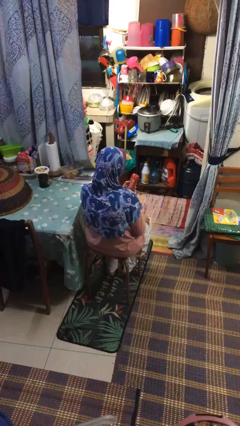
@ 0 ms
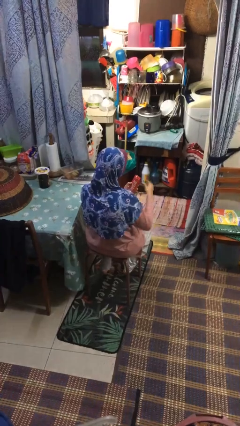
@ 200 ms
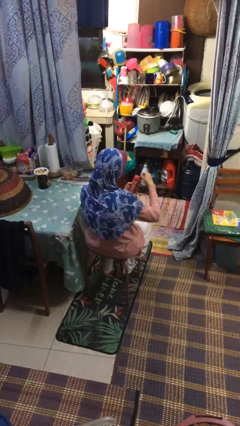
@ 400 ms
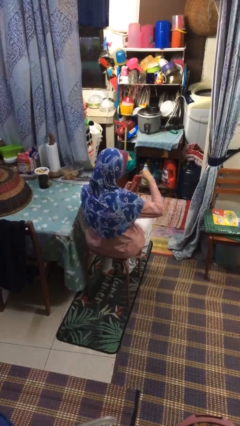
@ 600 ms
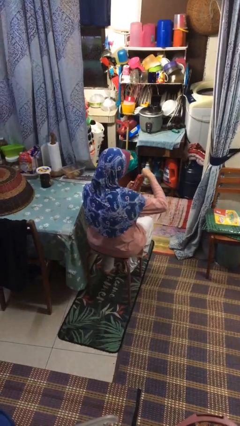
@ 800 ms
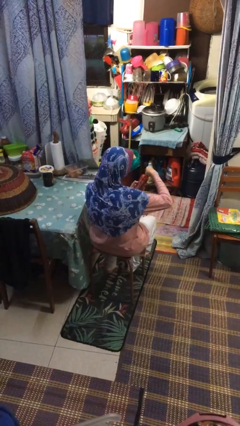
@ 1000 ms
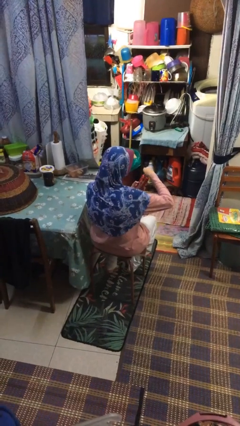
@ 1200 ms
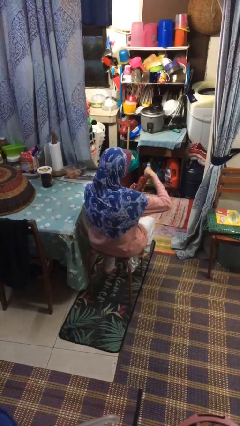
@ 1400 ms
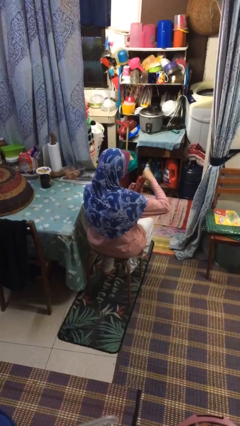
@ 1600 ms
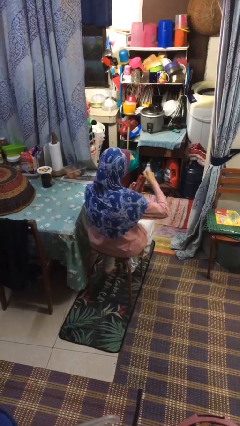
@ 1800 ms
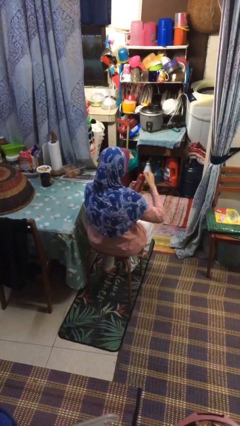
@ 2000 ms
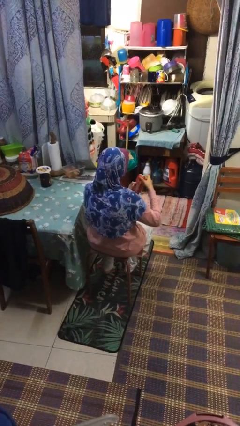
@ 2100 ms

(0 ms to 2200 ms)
person opens beverage can

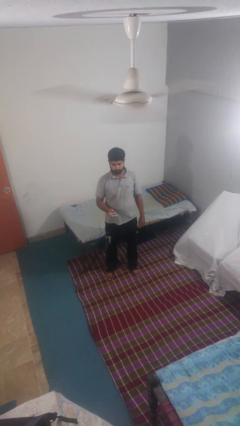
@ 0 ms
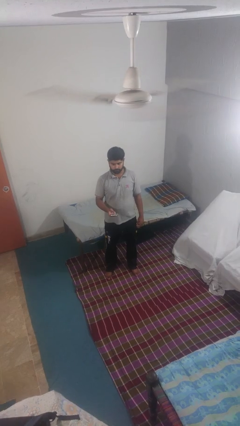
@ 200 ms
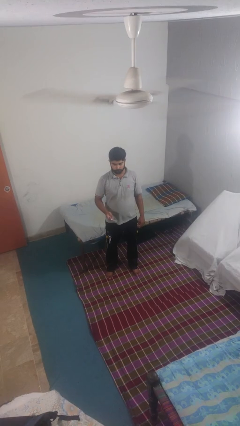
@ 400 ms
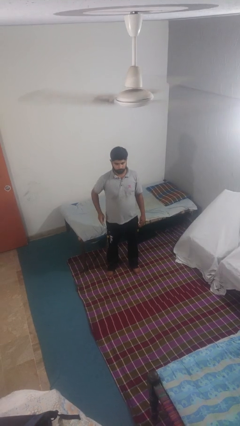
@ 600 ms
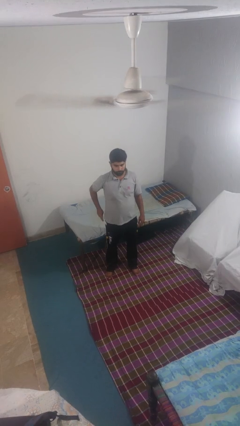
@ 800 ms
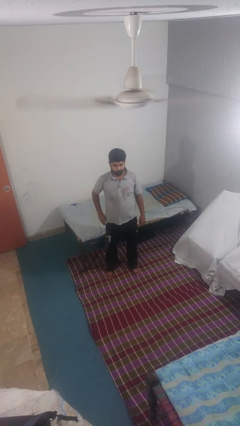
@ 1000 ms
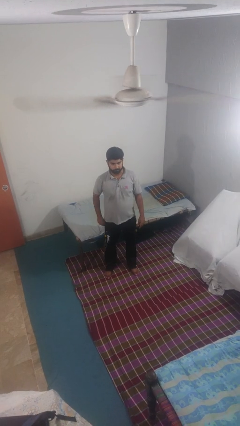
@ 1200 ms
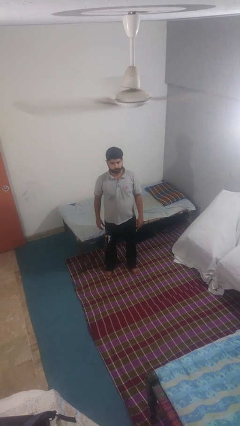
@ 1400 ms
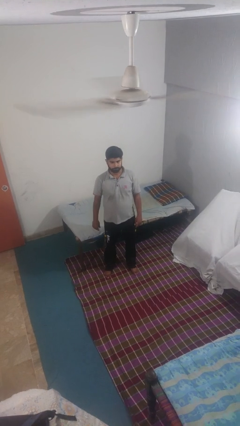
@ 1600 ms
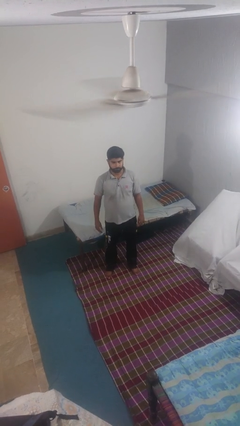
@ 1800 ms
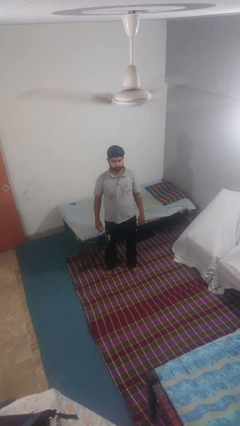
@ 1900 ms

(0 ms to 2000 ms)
person puts phone into pocket

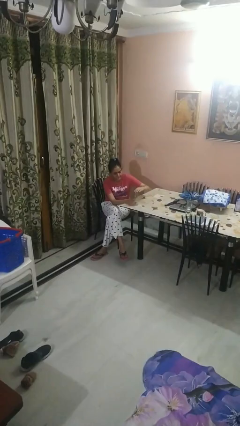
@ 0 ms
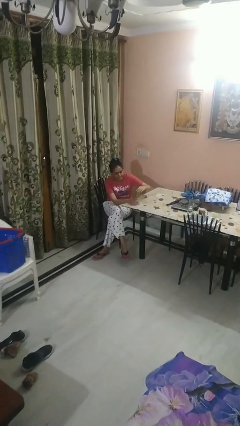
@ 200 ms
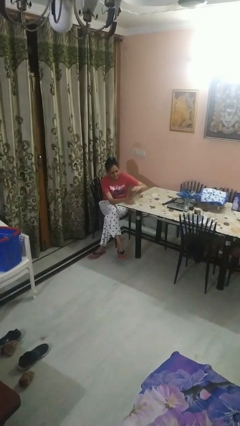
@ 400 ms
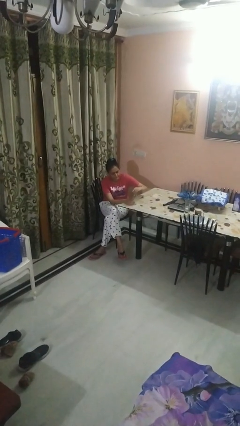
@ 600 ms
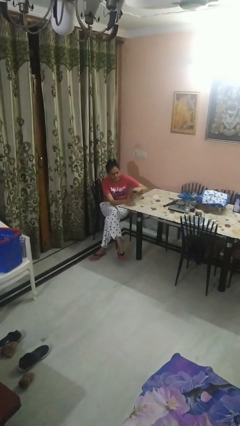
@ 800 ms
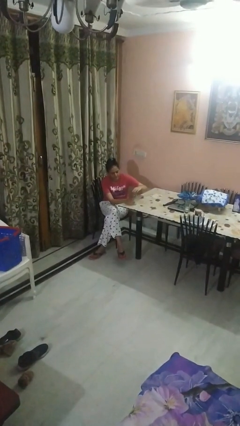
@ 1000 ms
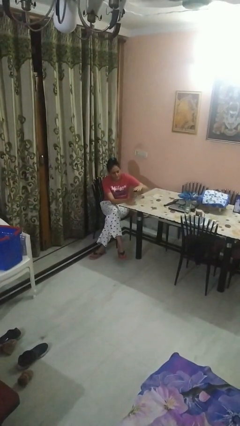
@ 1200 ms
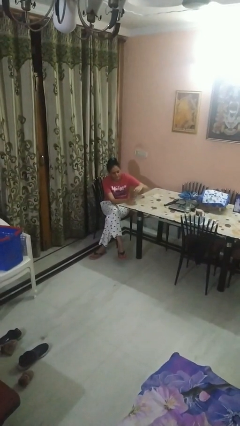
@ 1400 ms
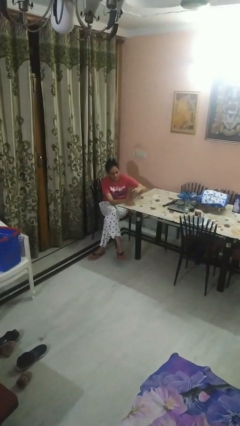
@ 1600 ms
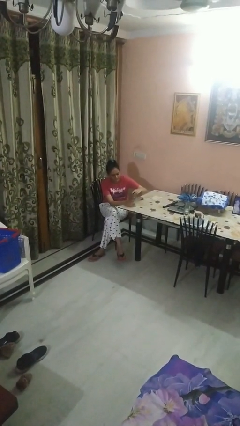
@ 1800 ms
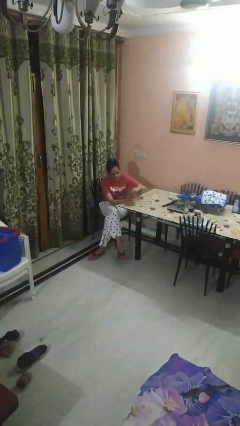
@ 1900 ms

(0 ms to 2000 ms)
person unscrews lid from bottle

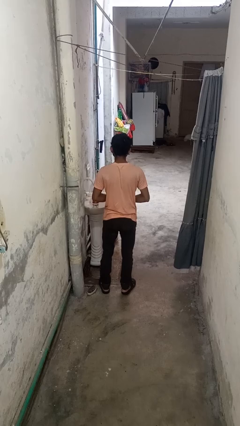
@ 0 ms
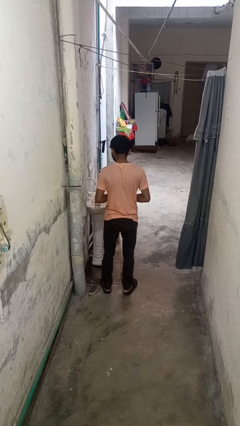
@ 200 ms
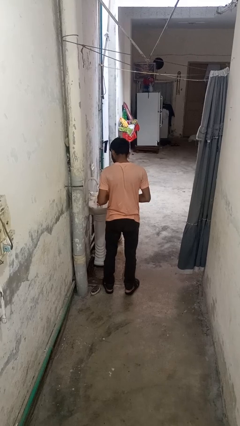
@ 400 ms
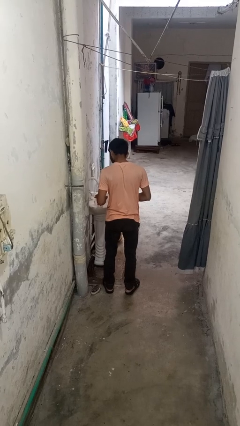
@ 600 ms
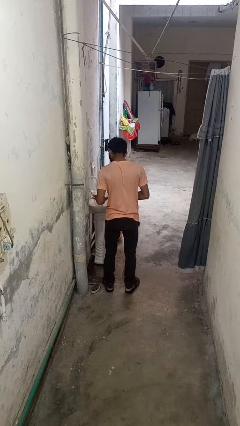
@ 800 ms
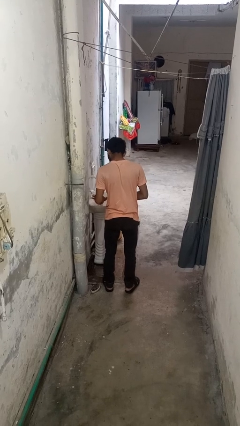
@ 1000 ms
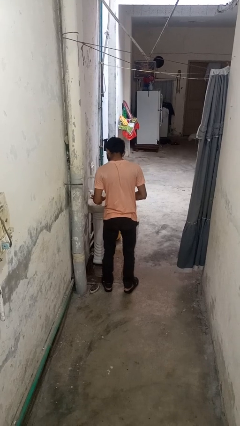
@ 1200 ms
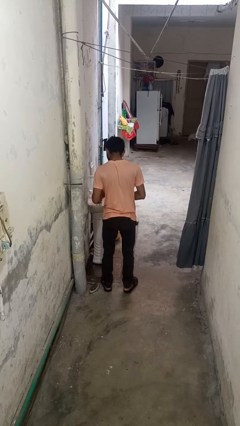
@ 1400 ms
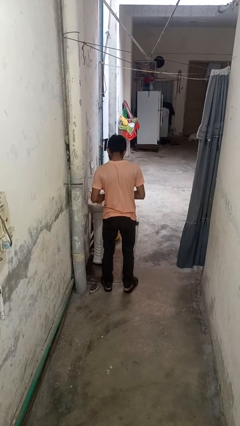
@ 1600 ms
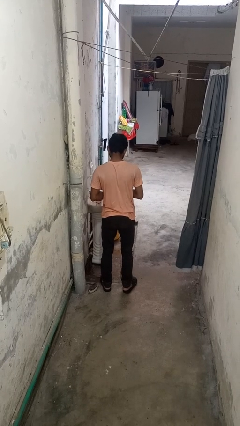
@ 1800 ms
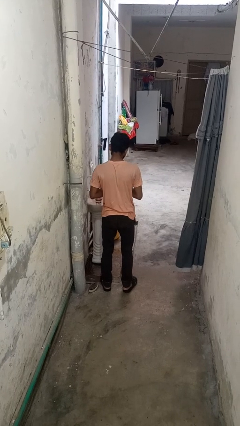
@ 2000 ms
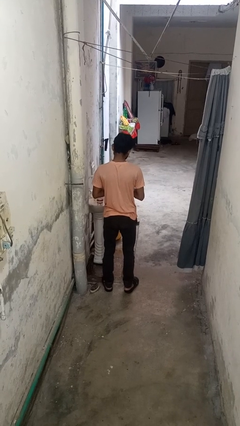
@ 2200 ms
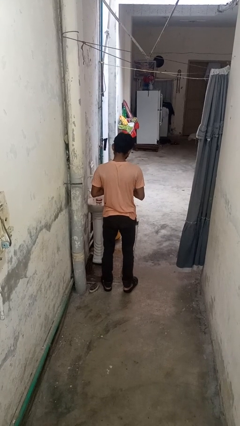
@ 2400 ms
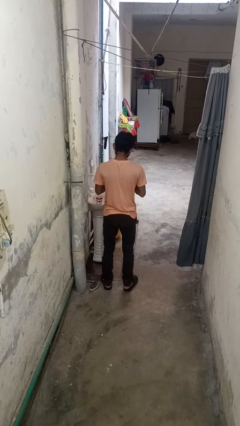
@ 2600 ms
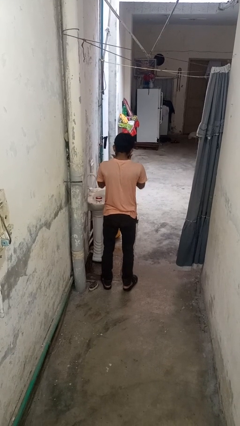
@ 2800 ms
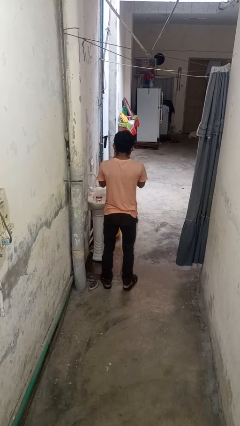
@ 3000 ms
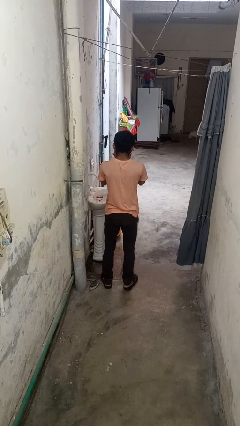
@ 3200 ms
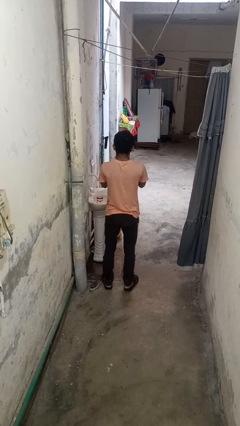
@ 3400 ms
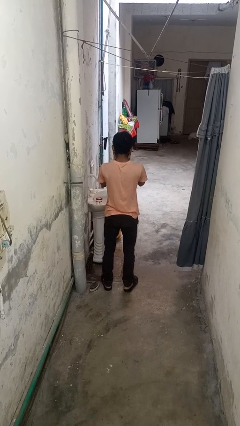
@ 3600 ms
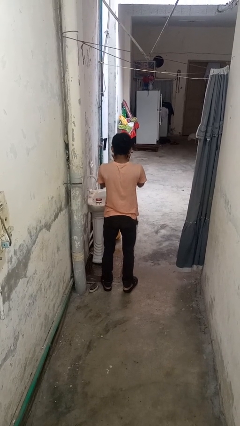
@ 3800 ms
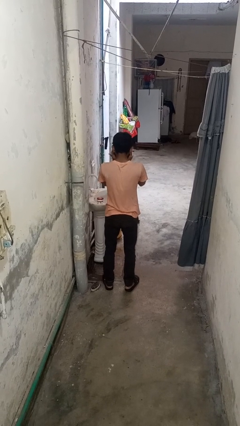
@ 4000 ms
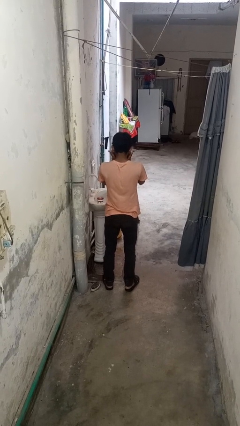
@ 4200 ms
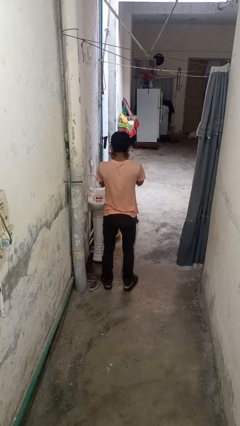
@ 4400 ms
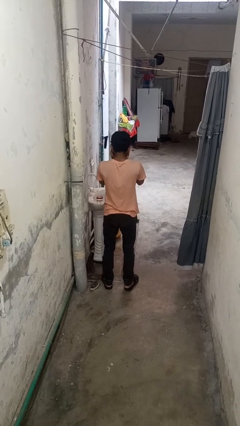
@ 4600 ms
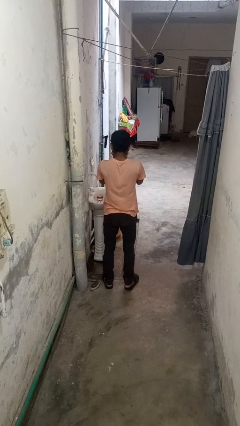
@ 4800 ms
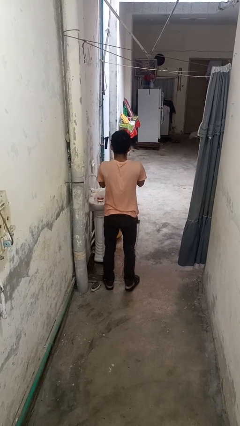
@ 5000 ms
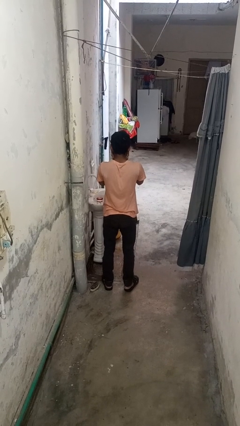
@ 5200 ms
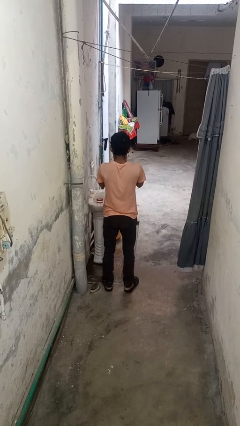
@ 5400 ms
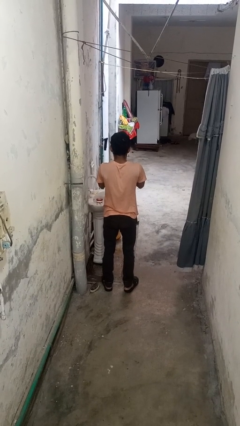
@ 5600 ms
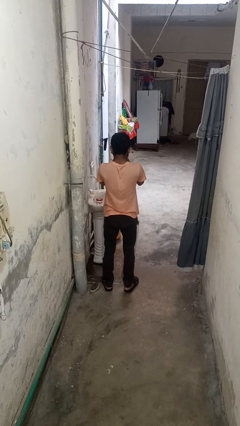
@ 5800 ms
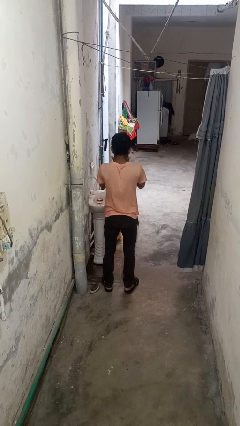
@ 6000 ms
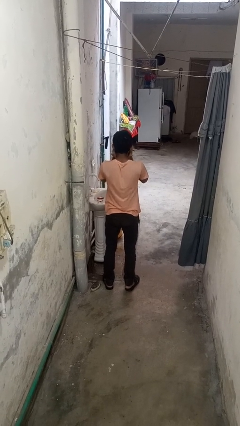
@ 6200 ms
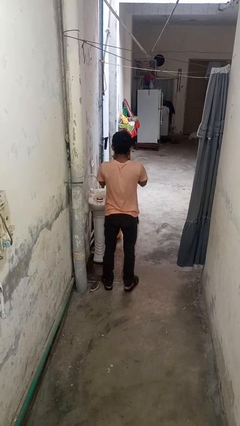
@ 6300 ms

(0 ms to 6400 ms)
person applies facial moisturizer

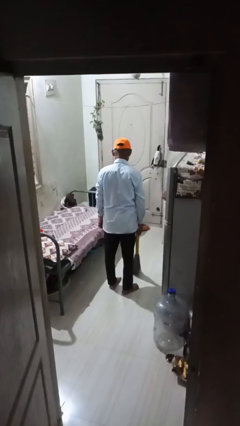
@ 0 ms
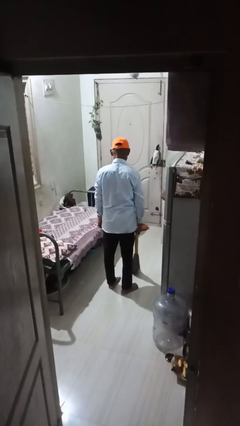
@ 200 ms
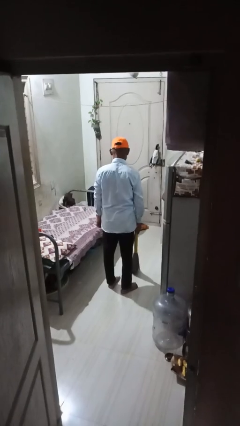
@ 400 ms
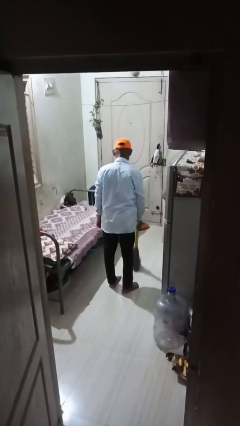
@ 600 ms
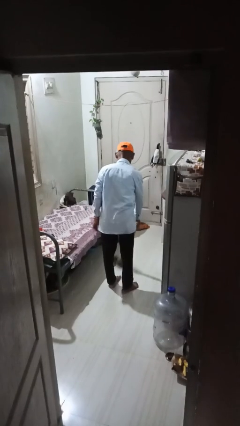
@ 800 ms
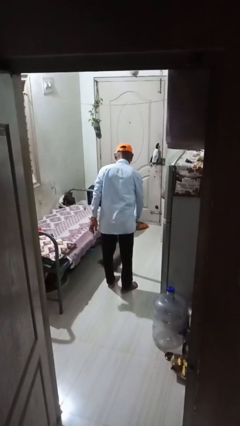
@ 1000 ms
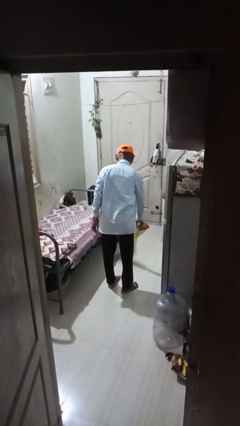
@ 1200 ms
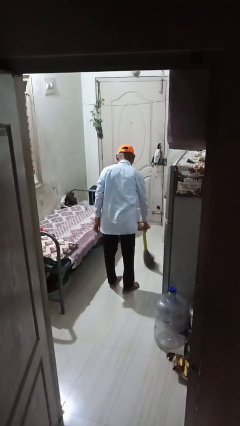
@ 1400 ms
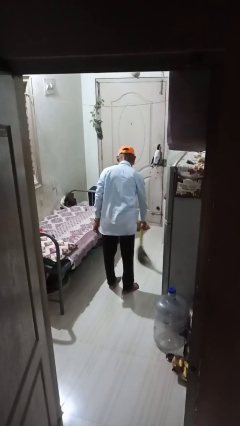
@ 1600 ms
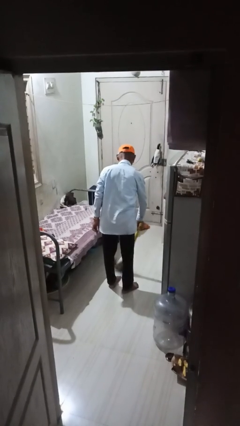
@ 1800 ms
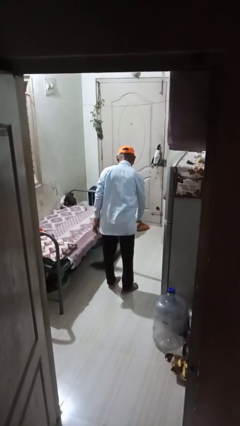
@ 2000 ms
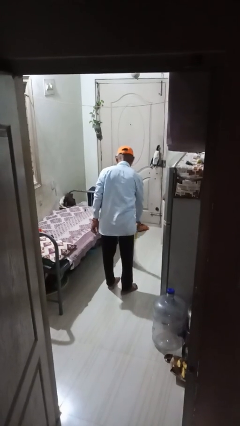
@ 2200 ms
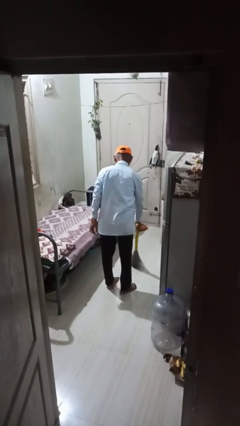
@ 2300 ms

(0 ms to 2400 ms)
person mops

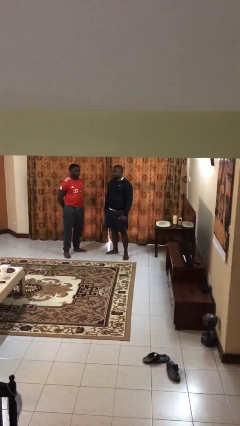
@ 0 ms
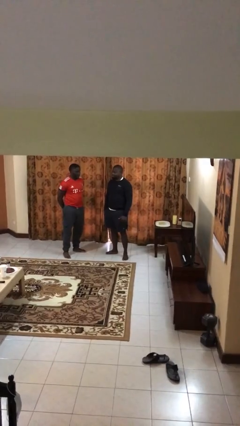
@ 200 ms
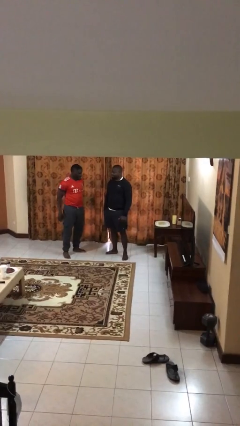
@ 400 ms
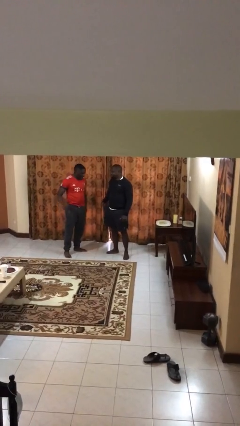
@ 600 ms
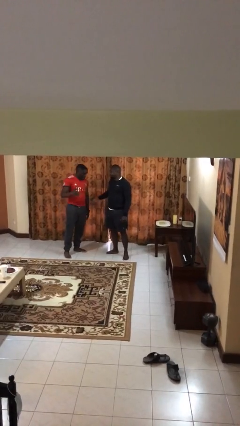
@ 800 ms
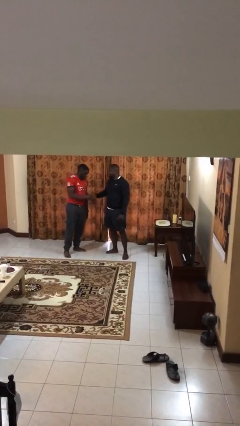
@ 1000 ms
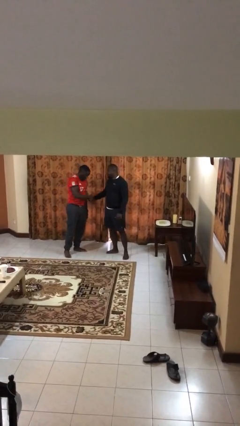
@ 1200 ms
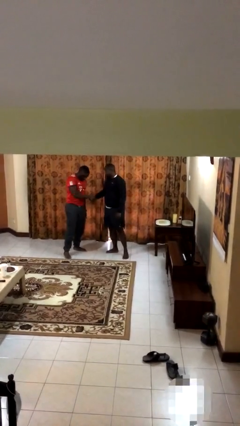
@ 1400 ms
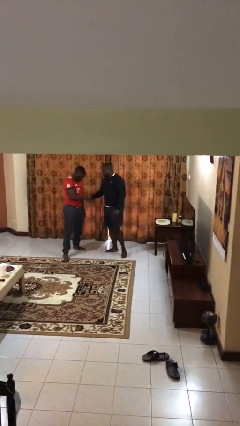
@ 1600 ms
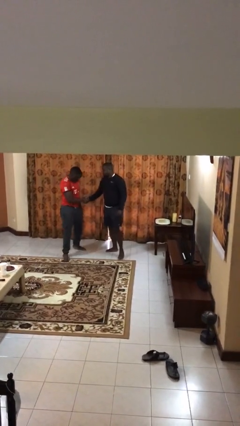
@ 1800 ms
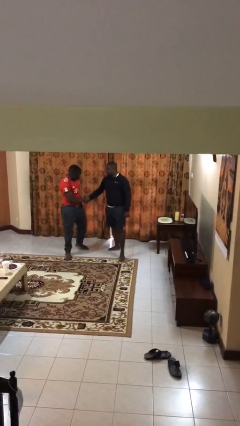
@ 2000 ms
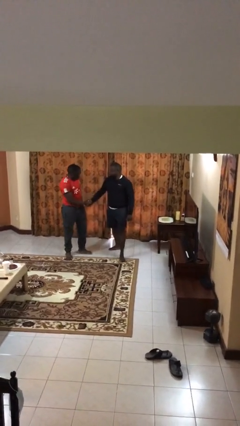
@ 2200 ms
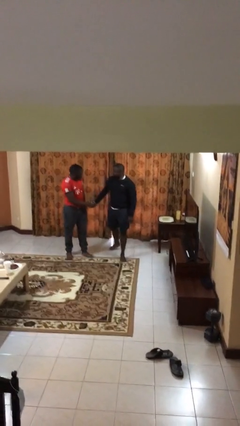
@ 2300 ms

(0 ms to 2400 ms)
person shakes hand
